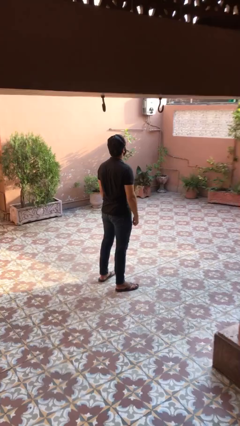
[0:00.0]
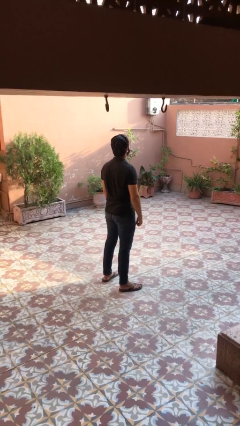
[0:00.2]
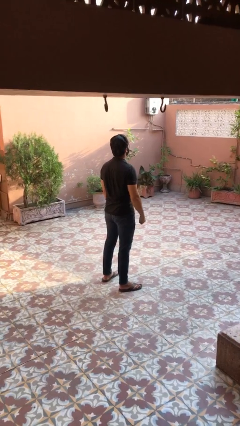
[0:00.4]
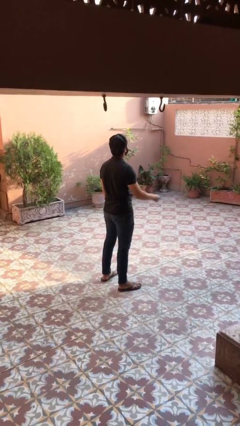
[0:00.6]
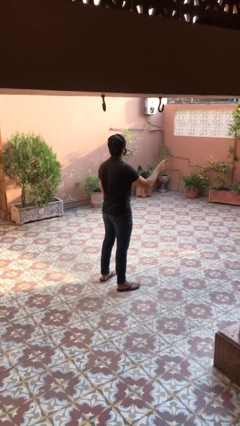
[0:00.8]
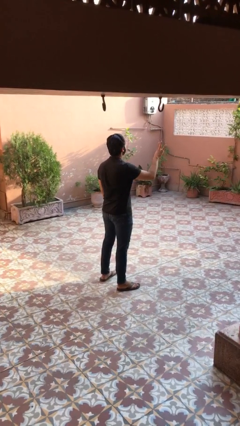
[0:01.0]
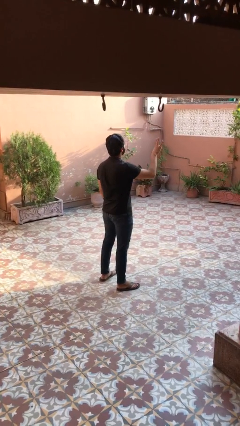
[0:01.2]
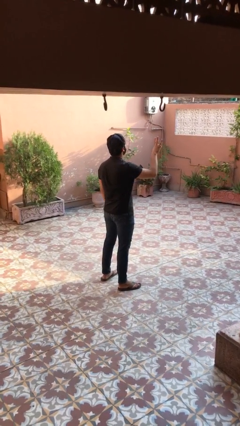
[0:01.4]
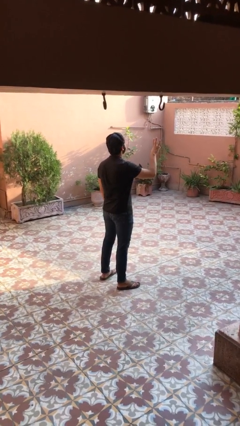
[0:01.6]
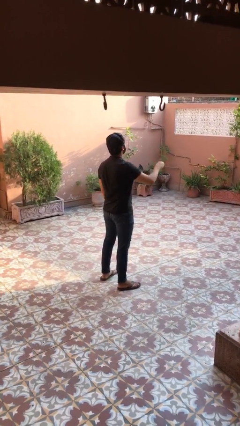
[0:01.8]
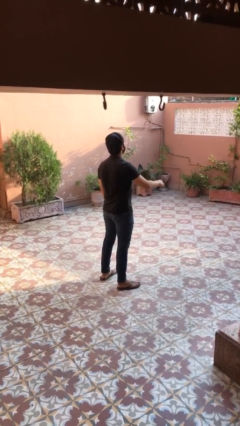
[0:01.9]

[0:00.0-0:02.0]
person gestures number three

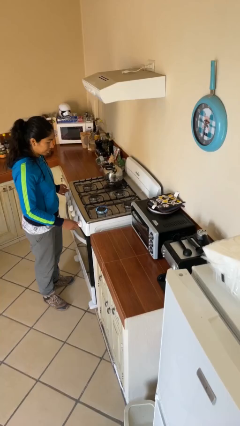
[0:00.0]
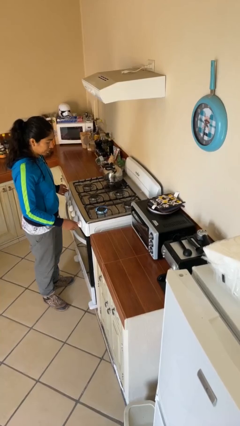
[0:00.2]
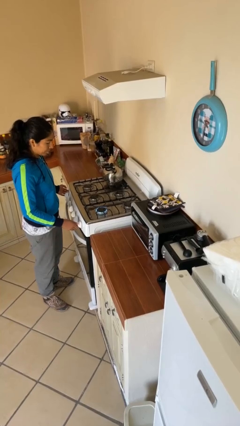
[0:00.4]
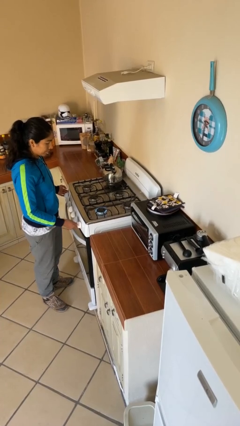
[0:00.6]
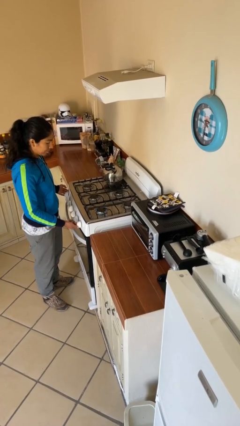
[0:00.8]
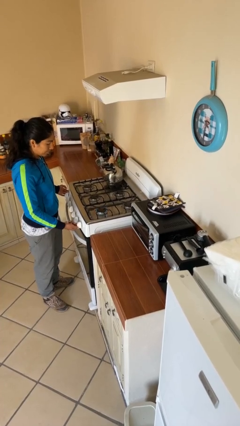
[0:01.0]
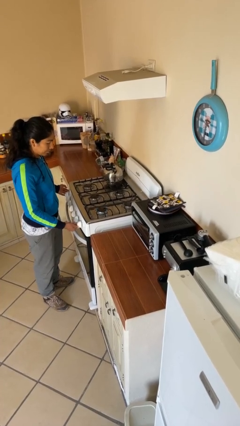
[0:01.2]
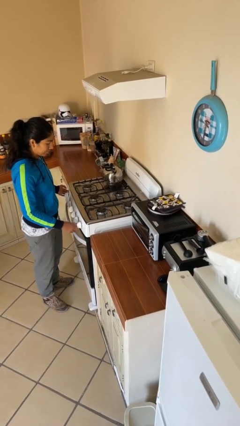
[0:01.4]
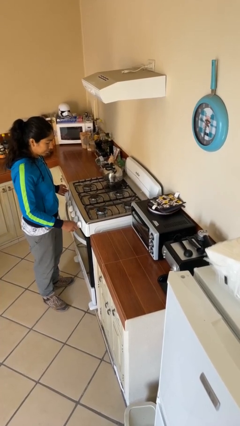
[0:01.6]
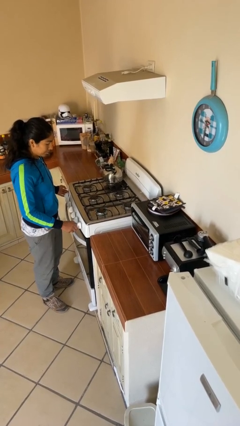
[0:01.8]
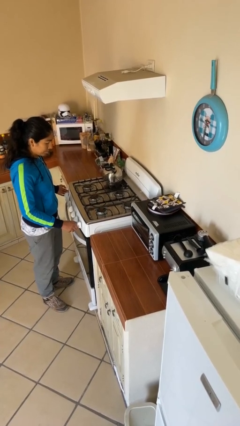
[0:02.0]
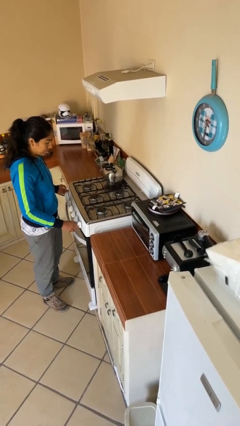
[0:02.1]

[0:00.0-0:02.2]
person turns off stovetop

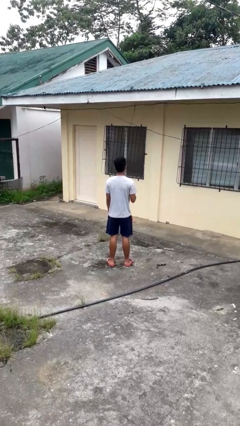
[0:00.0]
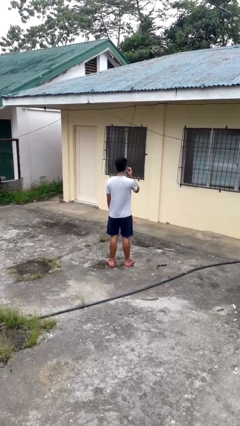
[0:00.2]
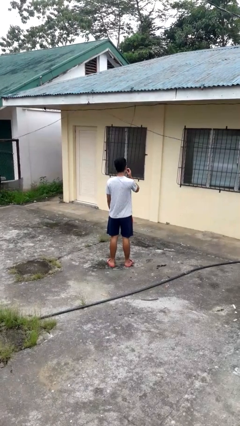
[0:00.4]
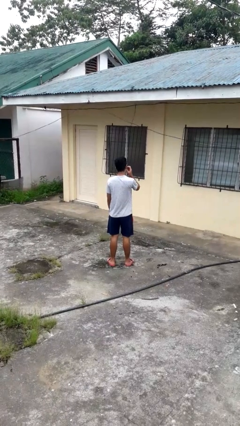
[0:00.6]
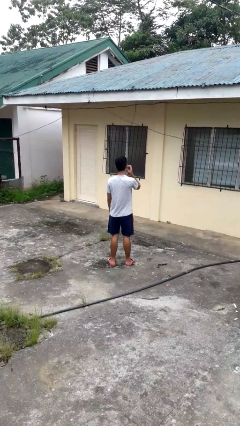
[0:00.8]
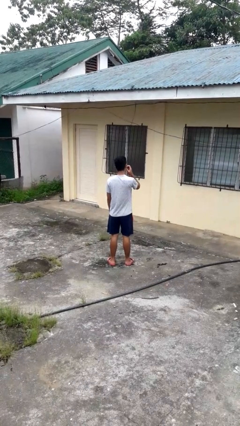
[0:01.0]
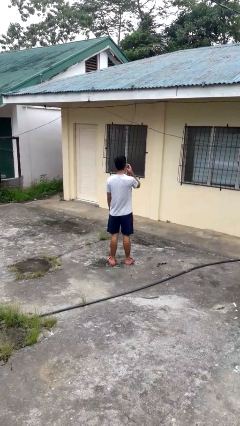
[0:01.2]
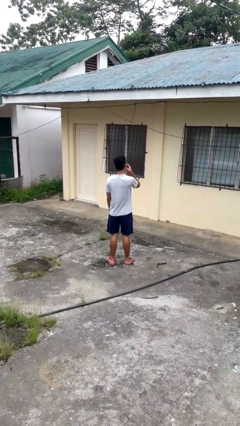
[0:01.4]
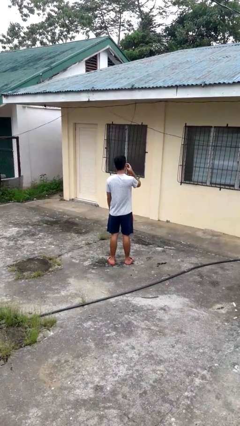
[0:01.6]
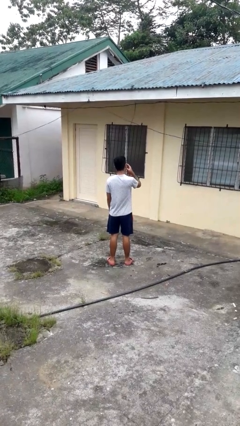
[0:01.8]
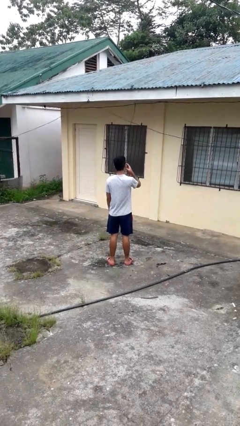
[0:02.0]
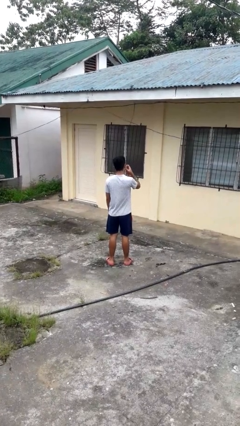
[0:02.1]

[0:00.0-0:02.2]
person scratches face

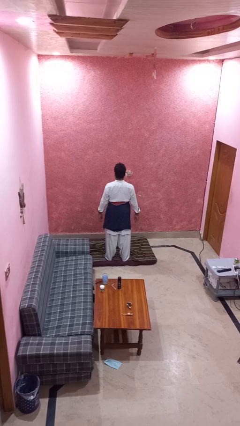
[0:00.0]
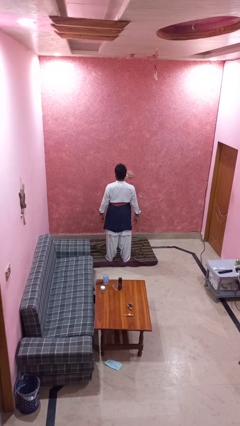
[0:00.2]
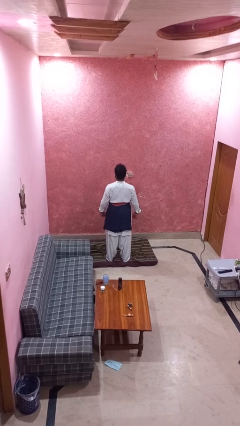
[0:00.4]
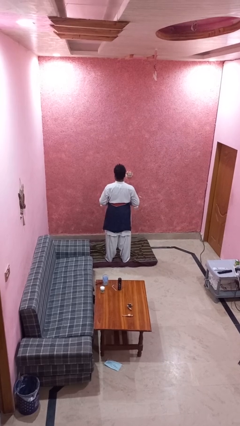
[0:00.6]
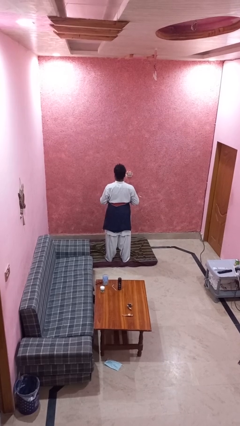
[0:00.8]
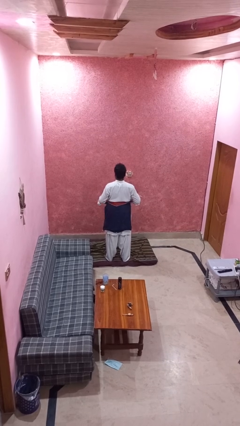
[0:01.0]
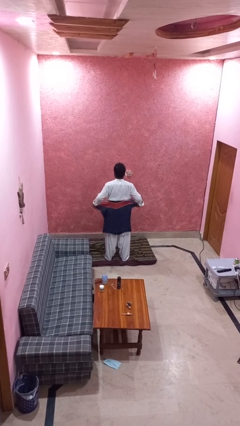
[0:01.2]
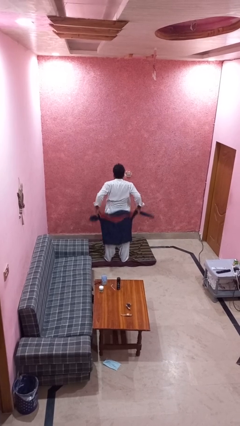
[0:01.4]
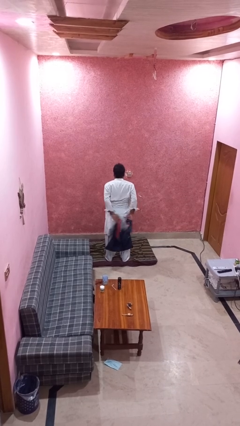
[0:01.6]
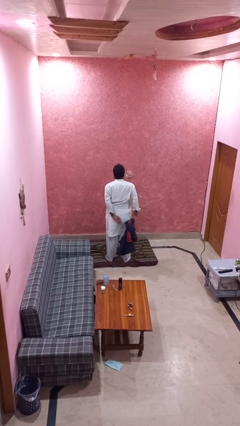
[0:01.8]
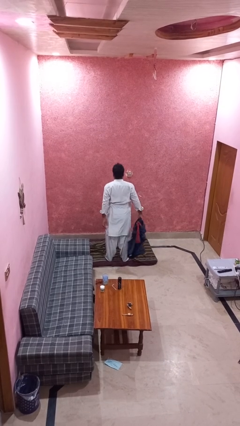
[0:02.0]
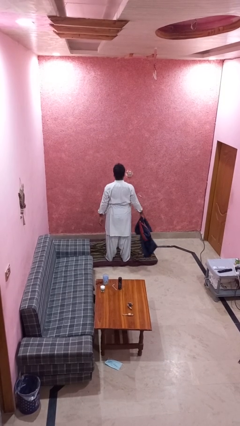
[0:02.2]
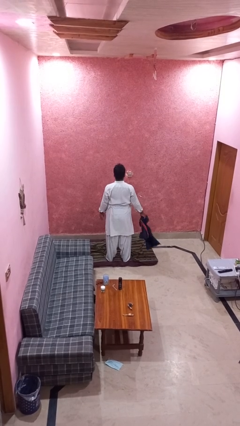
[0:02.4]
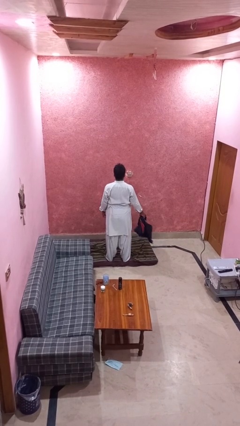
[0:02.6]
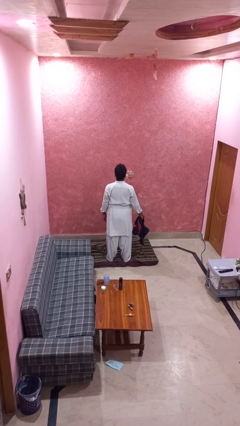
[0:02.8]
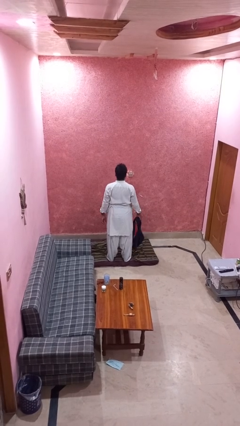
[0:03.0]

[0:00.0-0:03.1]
person unties jacket around waist

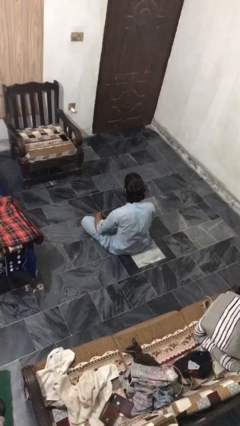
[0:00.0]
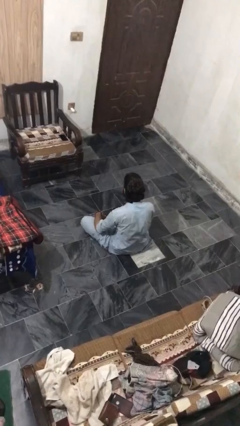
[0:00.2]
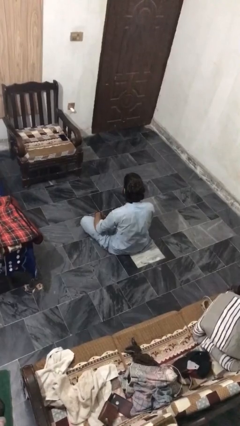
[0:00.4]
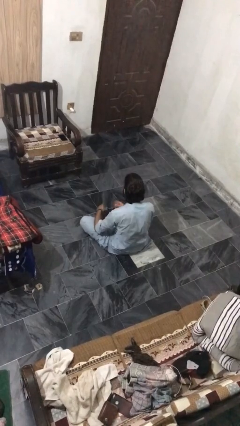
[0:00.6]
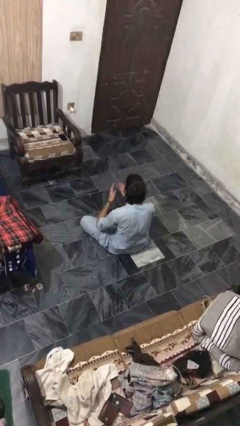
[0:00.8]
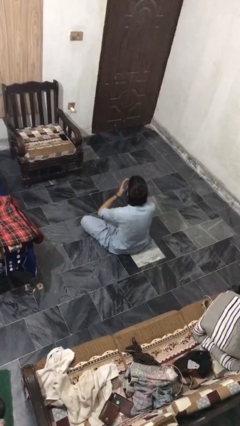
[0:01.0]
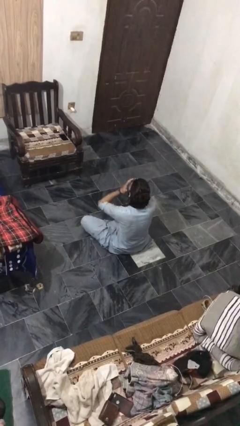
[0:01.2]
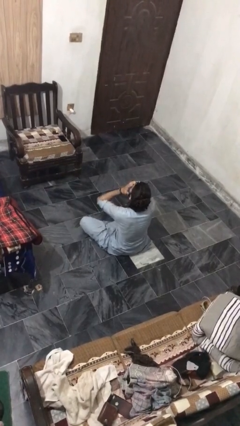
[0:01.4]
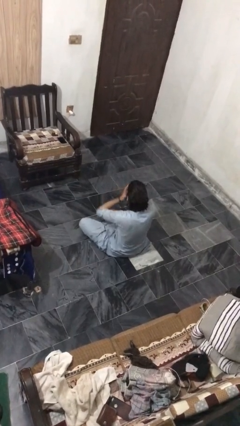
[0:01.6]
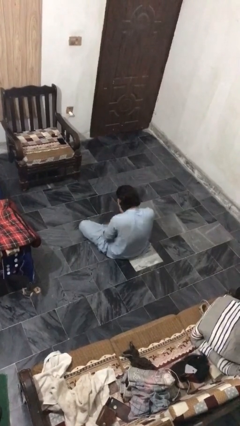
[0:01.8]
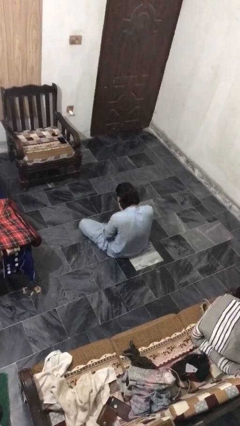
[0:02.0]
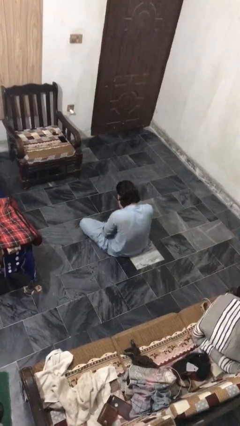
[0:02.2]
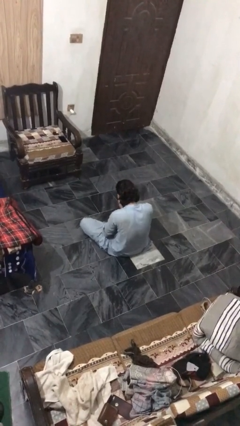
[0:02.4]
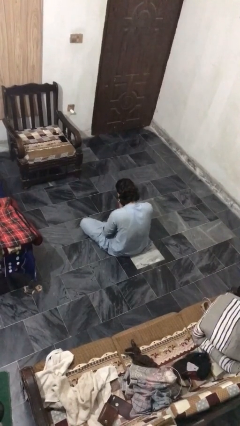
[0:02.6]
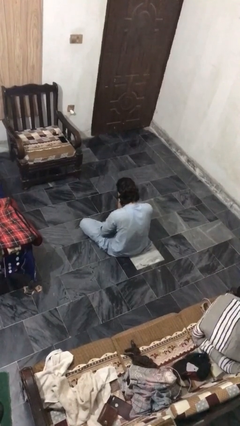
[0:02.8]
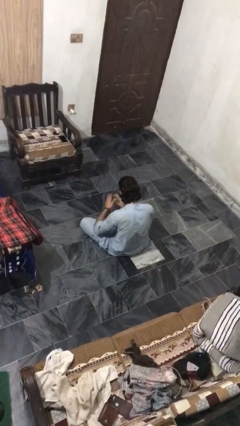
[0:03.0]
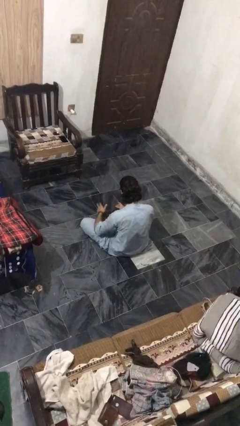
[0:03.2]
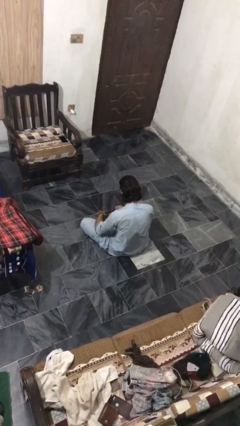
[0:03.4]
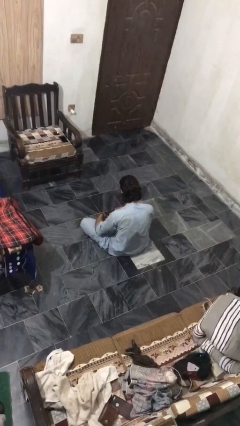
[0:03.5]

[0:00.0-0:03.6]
person sneezes into hand

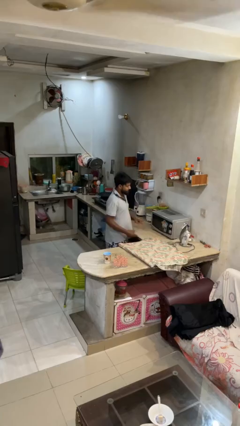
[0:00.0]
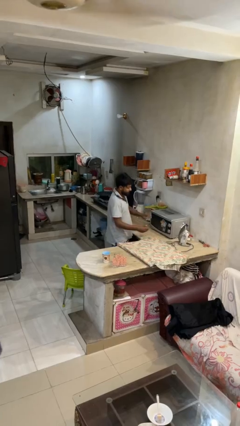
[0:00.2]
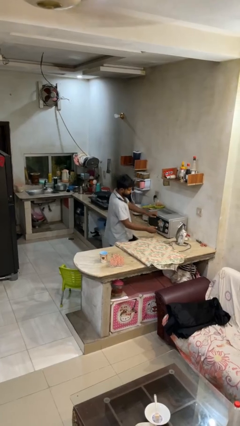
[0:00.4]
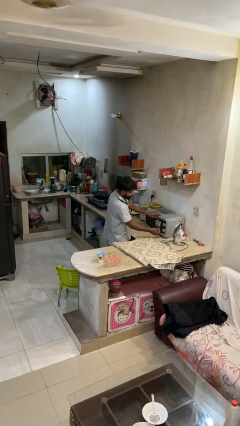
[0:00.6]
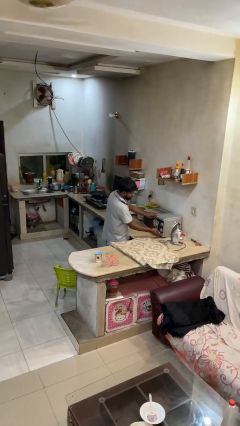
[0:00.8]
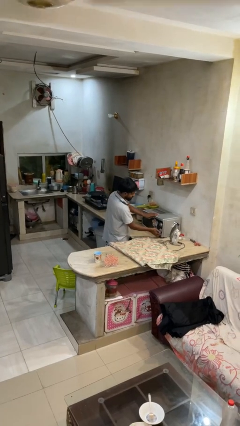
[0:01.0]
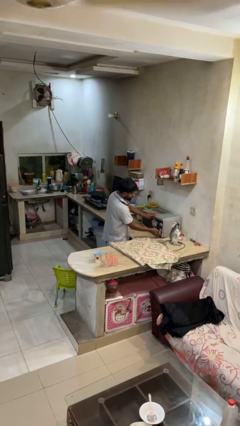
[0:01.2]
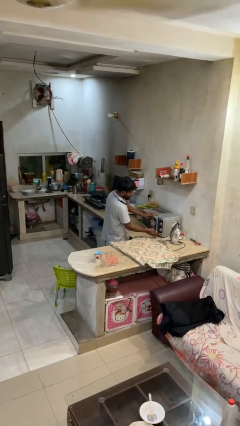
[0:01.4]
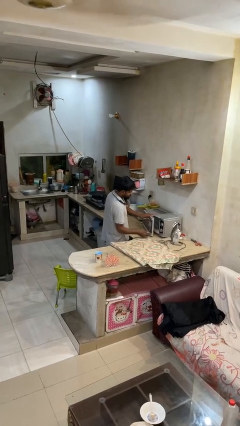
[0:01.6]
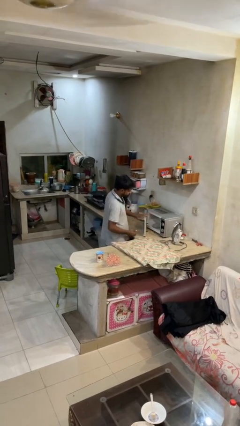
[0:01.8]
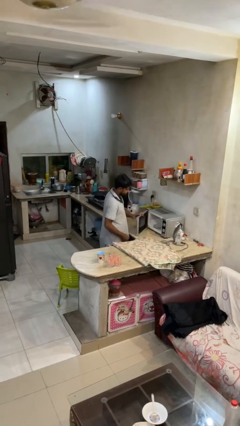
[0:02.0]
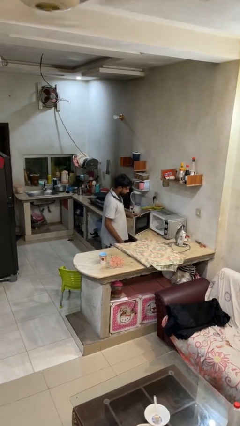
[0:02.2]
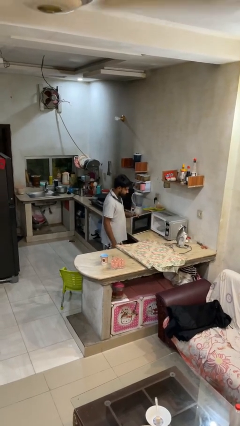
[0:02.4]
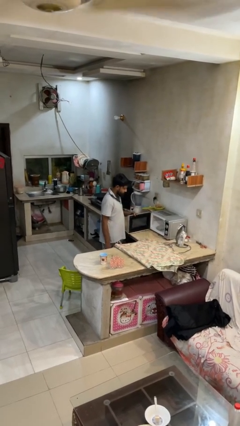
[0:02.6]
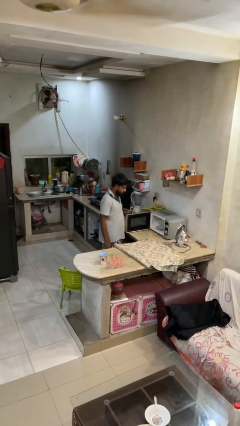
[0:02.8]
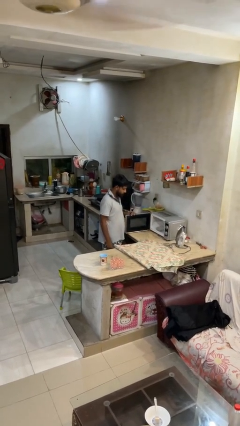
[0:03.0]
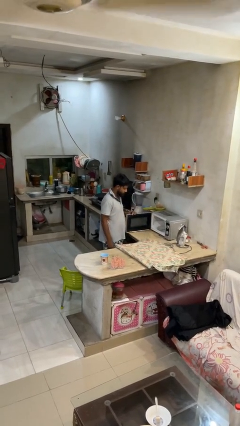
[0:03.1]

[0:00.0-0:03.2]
person opens microwave

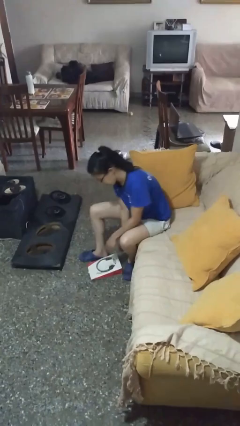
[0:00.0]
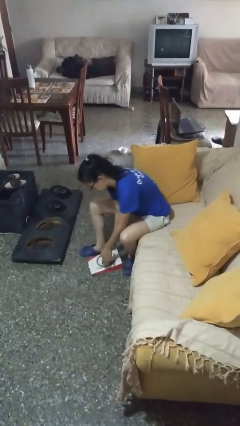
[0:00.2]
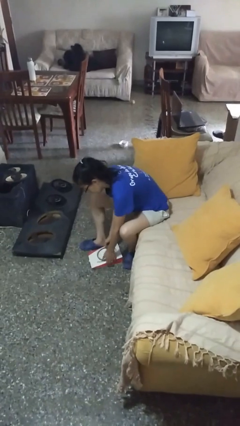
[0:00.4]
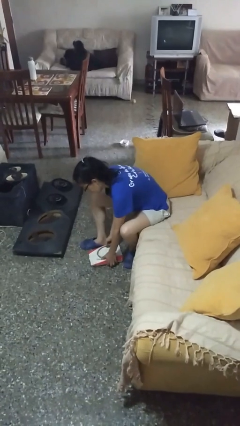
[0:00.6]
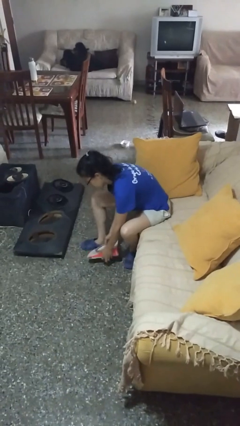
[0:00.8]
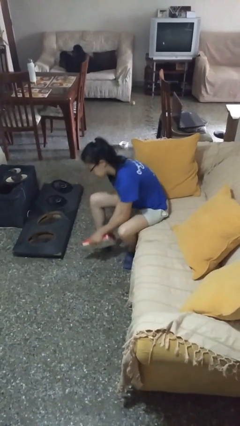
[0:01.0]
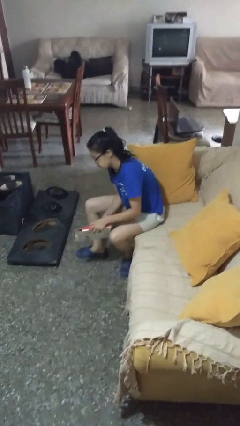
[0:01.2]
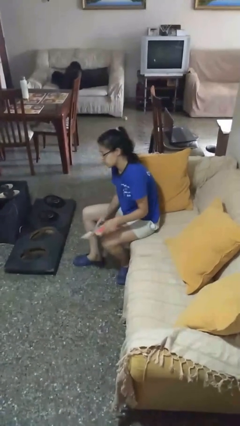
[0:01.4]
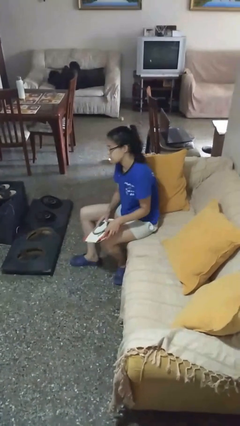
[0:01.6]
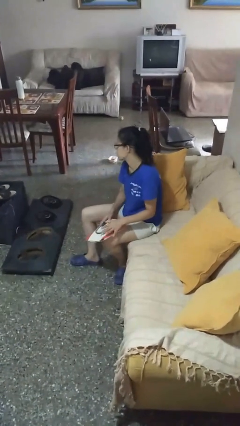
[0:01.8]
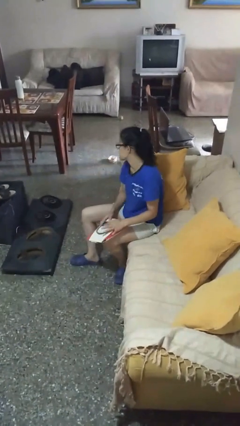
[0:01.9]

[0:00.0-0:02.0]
person picks up object from floor
